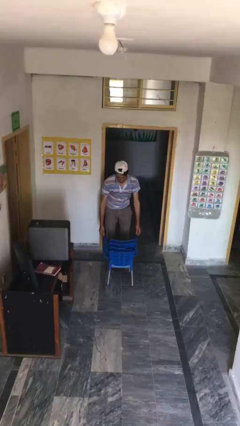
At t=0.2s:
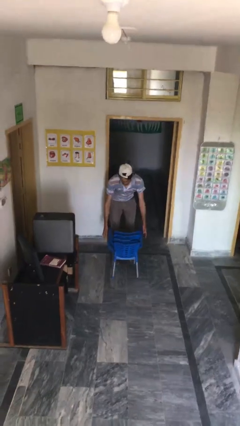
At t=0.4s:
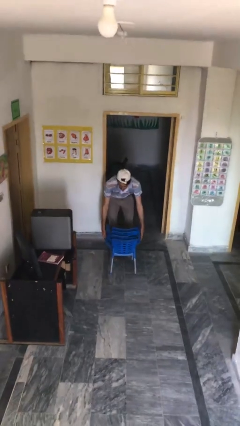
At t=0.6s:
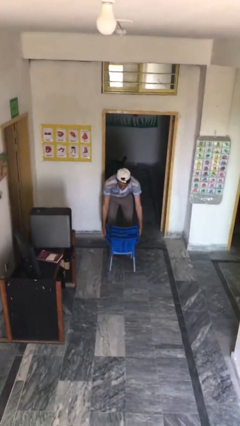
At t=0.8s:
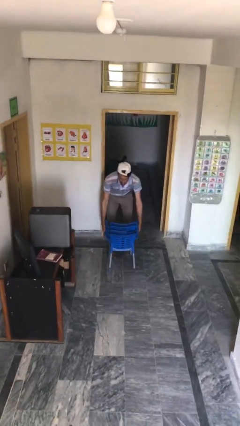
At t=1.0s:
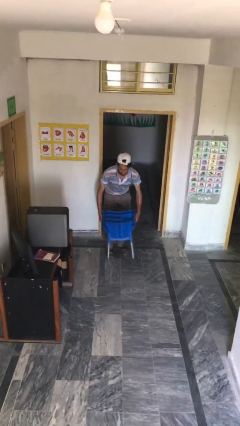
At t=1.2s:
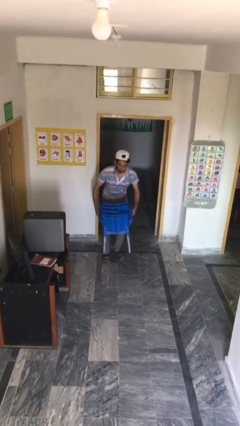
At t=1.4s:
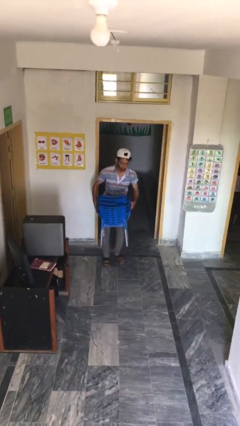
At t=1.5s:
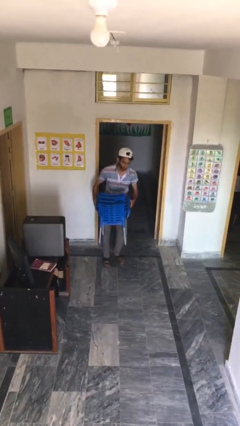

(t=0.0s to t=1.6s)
person picks up object from floor

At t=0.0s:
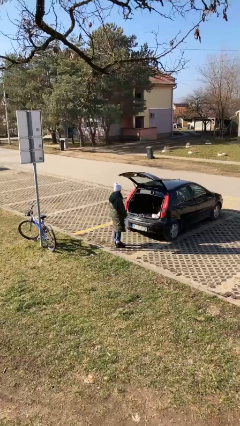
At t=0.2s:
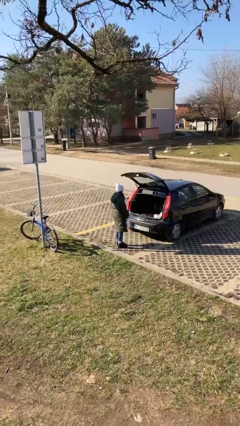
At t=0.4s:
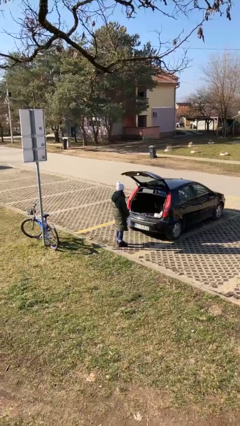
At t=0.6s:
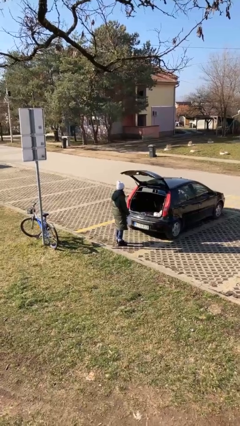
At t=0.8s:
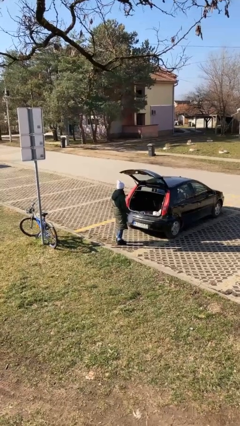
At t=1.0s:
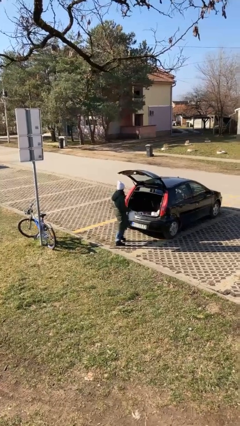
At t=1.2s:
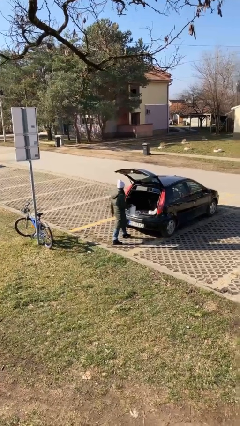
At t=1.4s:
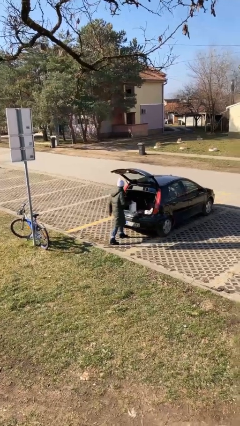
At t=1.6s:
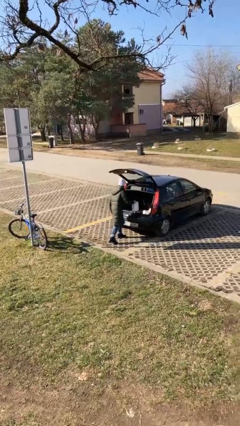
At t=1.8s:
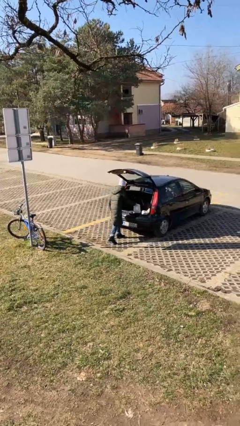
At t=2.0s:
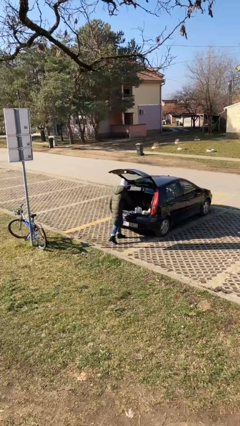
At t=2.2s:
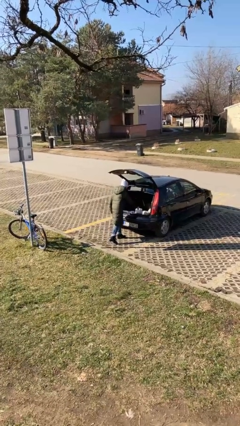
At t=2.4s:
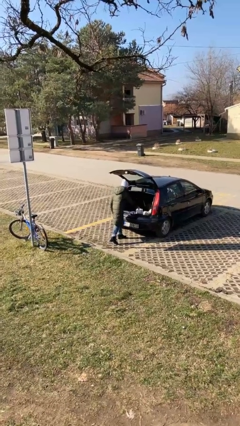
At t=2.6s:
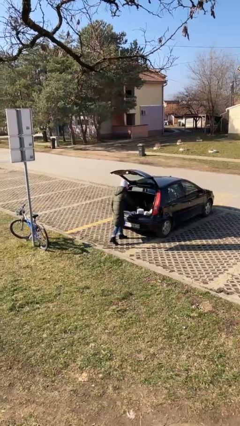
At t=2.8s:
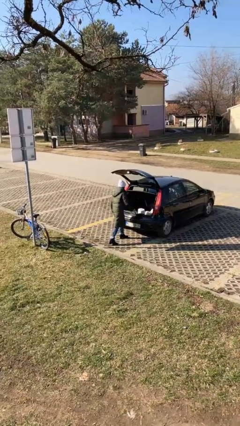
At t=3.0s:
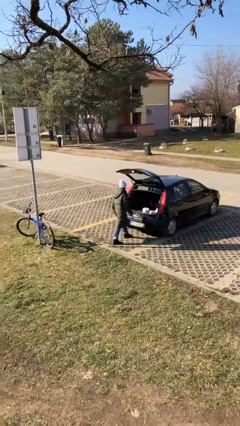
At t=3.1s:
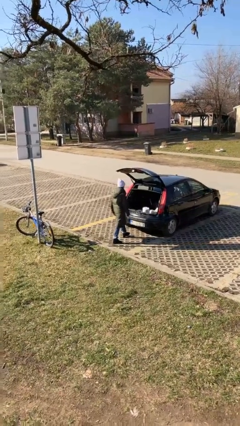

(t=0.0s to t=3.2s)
person loads car

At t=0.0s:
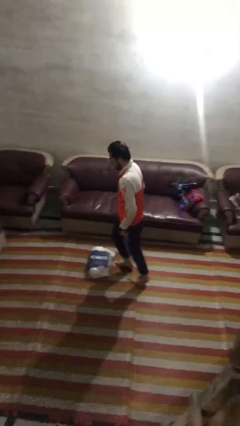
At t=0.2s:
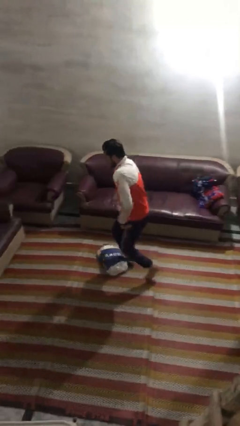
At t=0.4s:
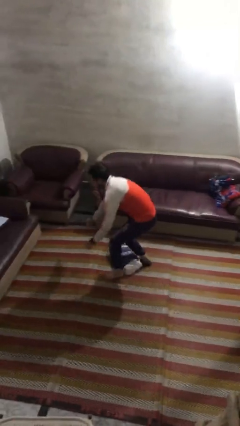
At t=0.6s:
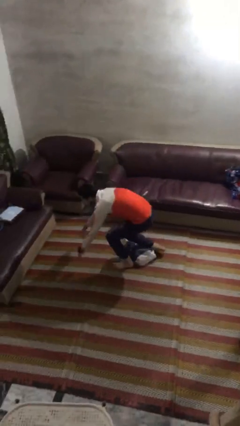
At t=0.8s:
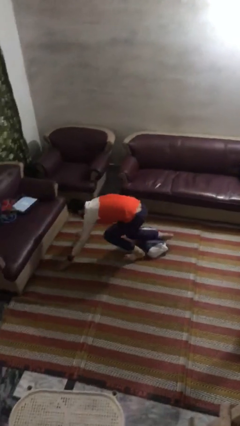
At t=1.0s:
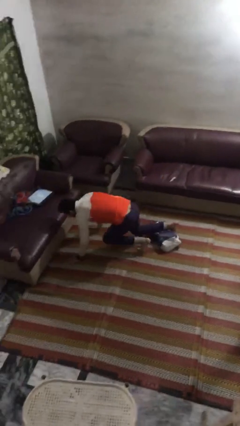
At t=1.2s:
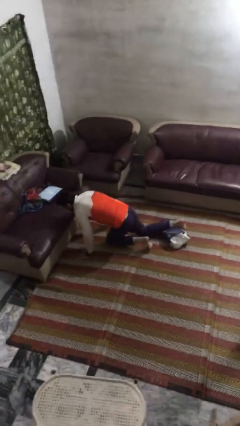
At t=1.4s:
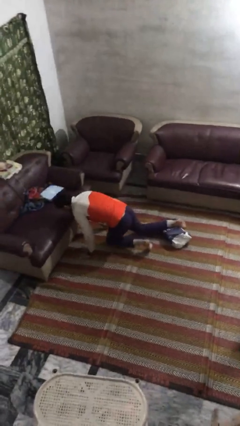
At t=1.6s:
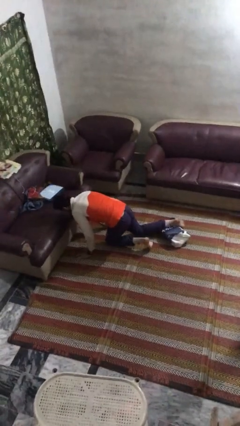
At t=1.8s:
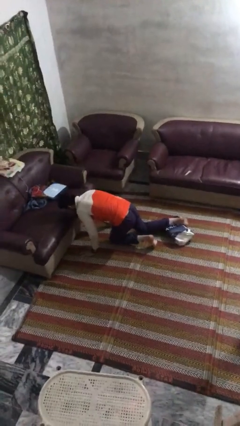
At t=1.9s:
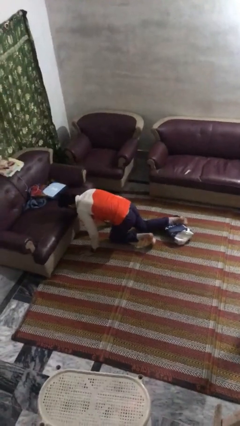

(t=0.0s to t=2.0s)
person trips on object on floor

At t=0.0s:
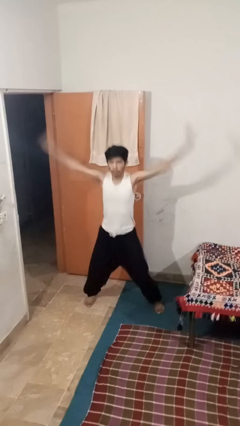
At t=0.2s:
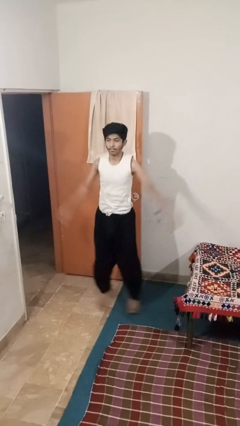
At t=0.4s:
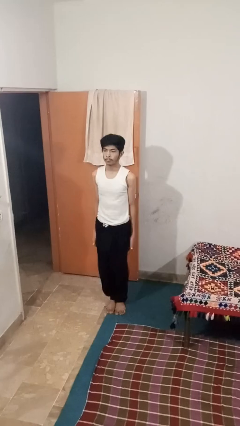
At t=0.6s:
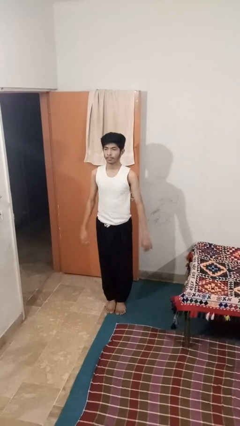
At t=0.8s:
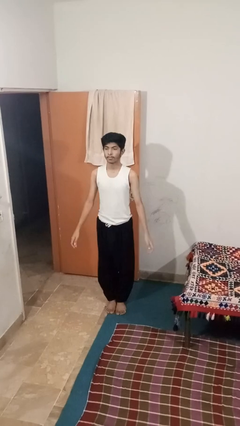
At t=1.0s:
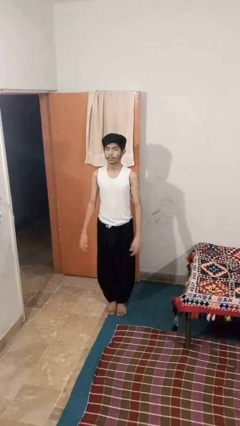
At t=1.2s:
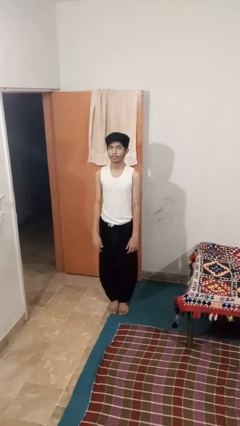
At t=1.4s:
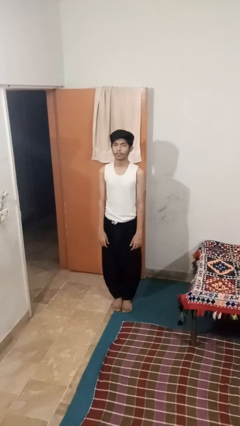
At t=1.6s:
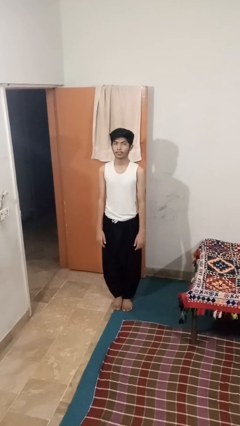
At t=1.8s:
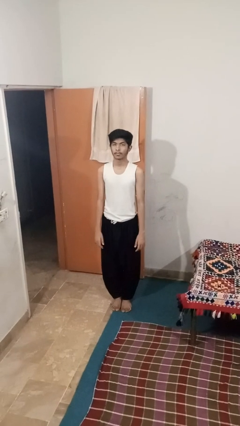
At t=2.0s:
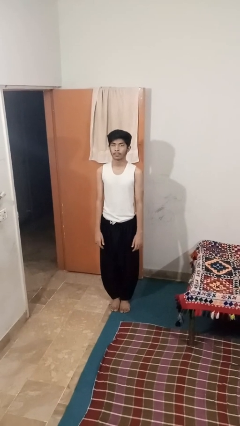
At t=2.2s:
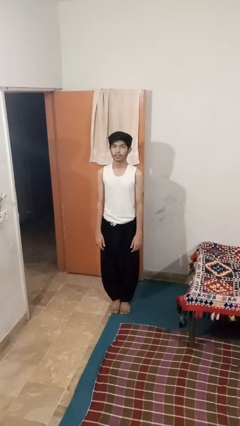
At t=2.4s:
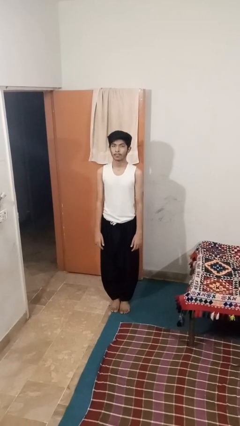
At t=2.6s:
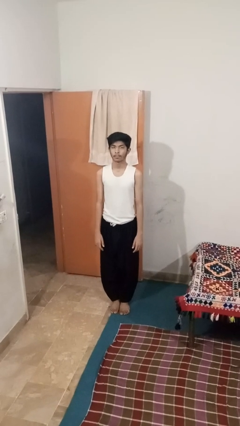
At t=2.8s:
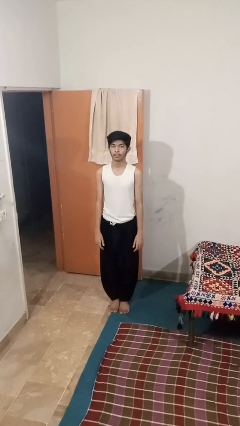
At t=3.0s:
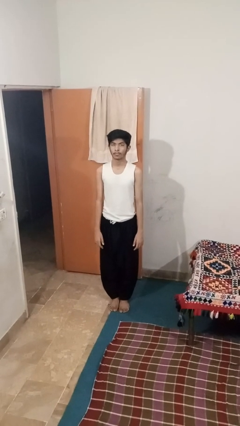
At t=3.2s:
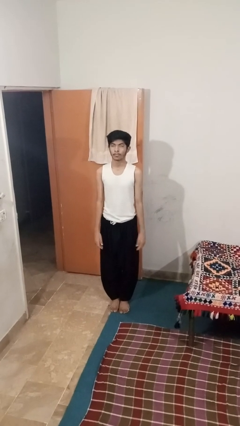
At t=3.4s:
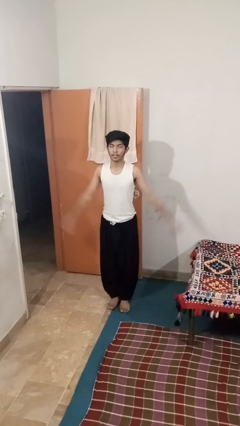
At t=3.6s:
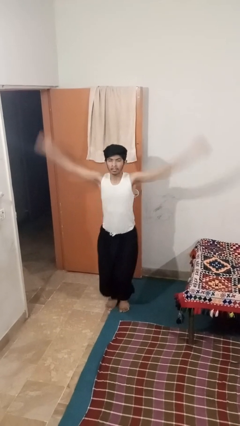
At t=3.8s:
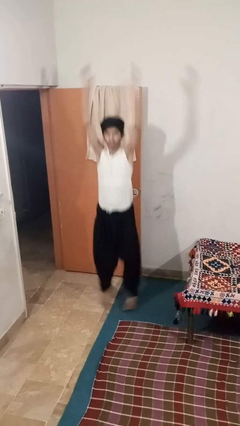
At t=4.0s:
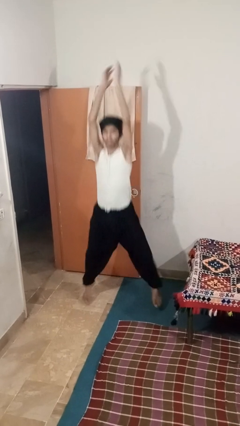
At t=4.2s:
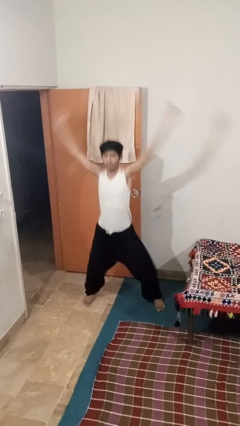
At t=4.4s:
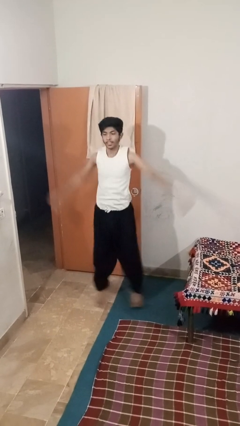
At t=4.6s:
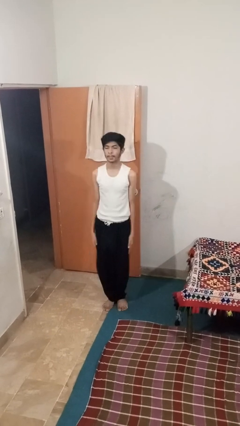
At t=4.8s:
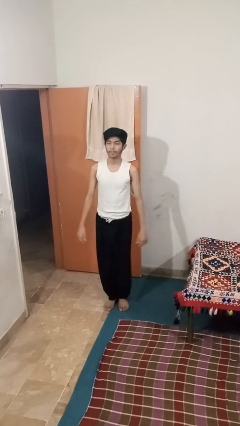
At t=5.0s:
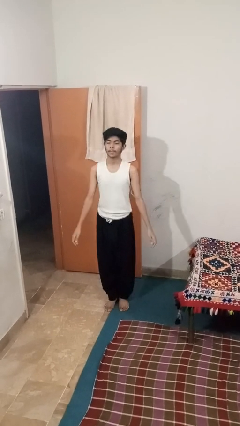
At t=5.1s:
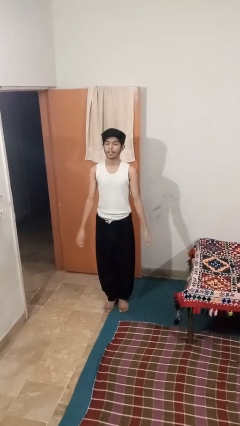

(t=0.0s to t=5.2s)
person exercises with jumping jacks

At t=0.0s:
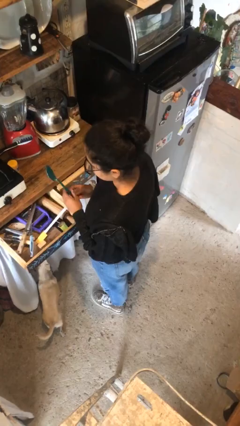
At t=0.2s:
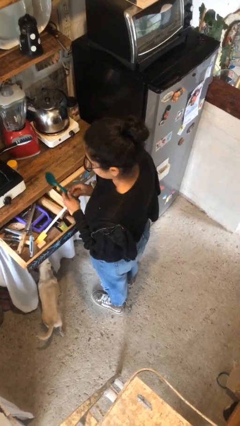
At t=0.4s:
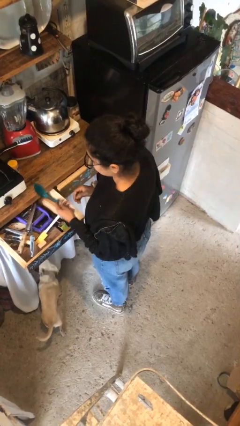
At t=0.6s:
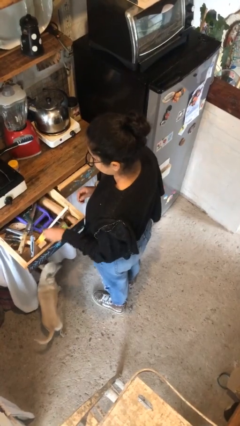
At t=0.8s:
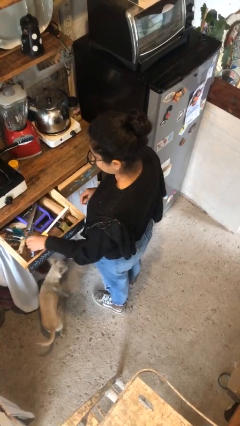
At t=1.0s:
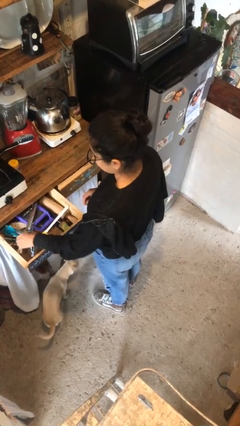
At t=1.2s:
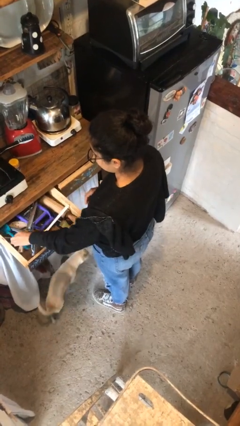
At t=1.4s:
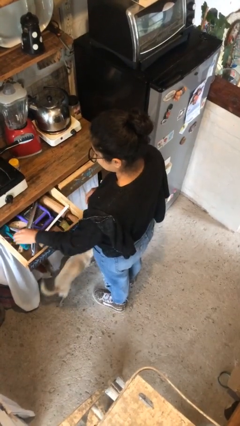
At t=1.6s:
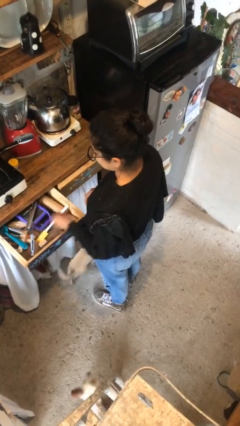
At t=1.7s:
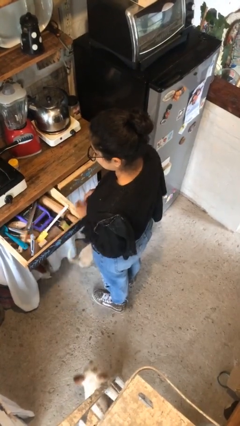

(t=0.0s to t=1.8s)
person puts object into kitchen drawer

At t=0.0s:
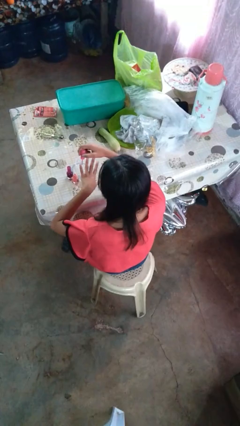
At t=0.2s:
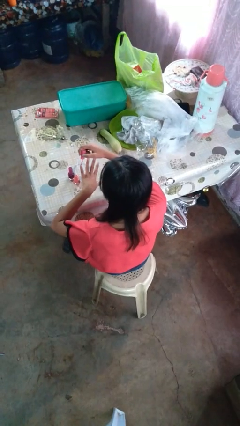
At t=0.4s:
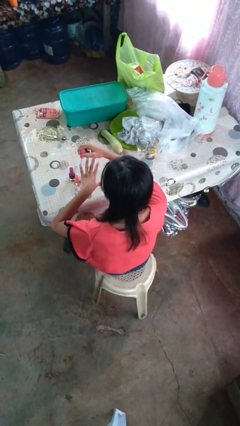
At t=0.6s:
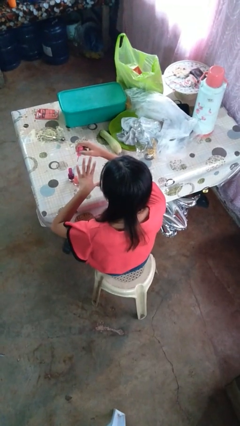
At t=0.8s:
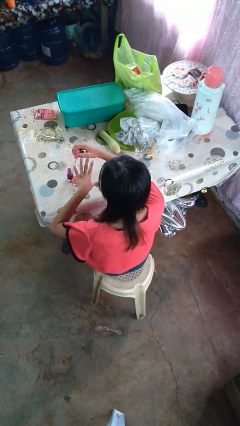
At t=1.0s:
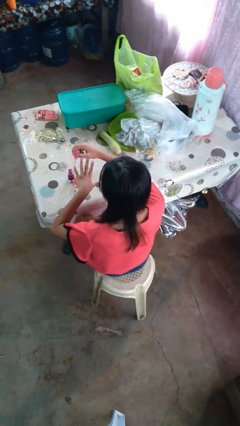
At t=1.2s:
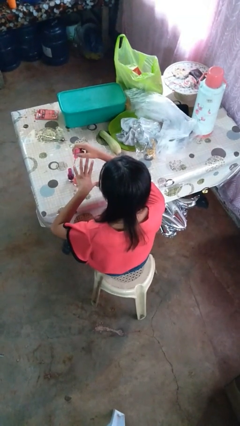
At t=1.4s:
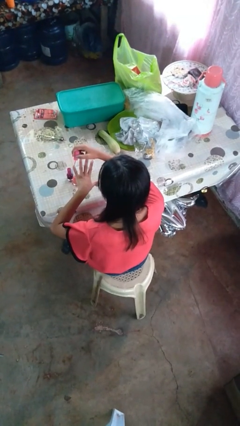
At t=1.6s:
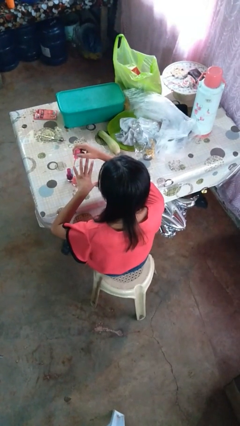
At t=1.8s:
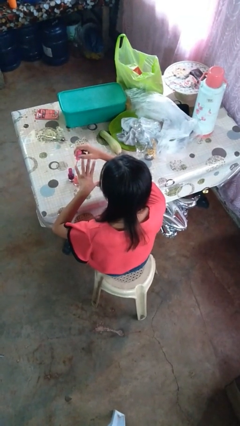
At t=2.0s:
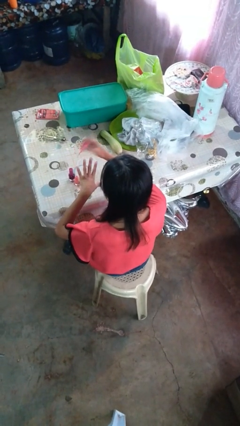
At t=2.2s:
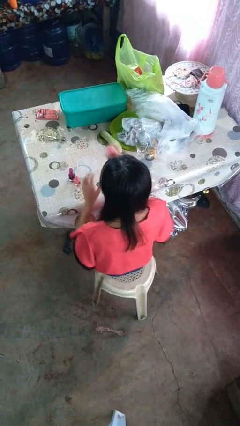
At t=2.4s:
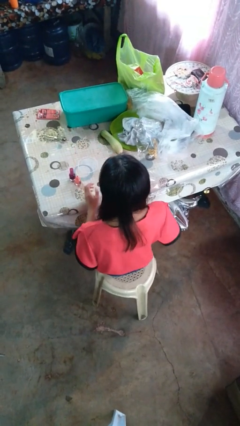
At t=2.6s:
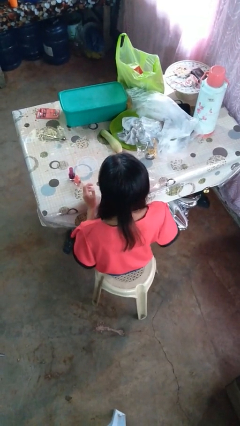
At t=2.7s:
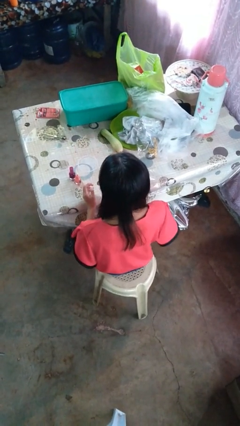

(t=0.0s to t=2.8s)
person paints fingernails

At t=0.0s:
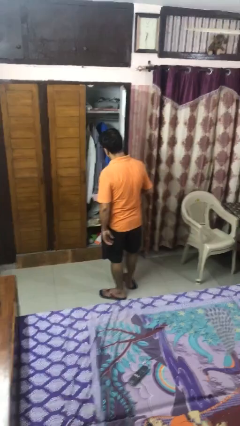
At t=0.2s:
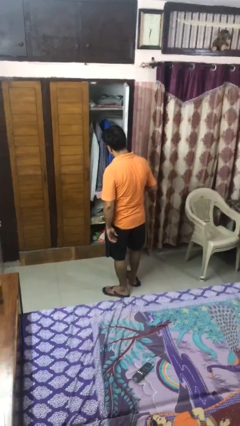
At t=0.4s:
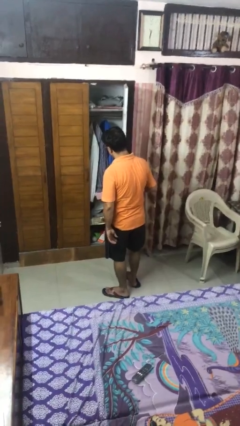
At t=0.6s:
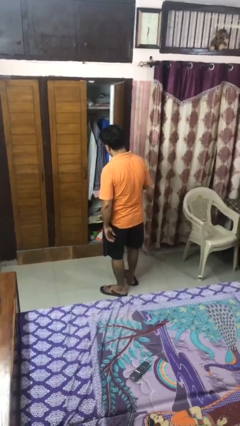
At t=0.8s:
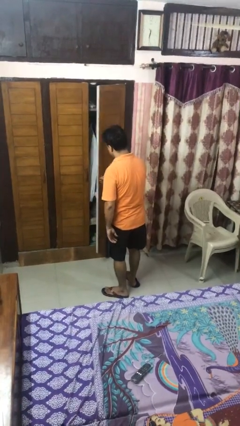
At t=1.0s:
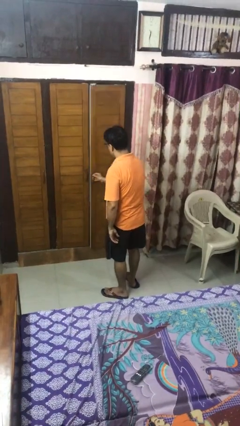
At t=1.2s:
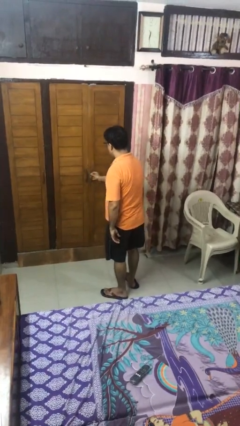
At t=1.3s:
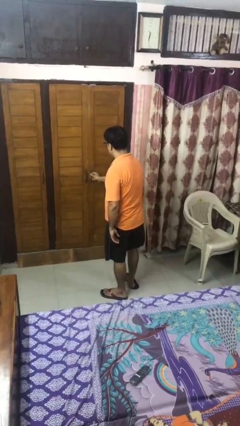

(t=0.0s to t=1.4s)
person closes closet door
